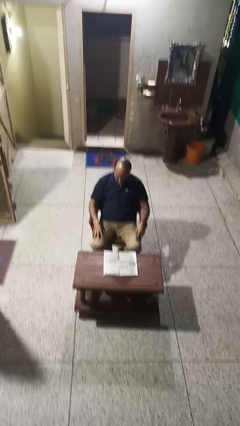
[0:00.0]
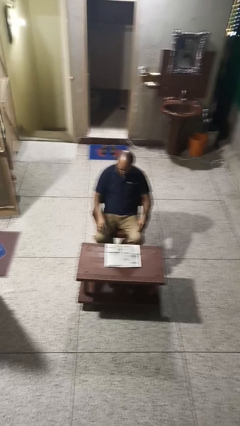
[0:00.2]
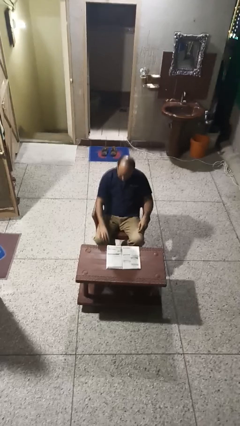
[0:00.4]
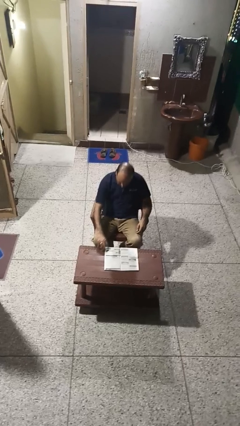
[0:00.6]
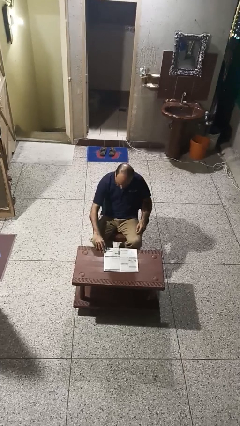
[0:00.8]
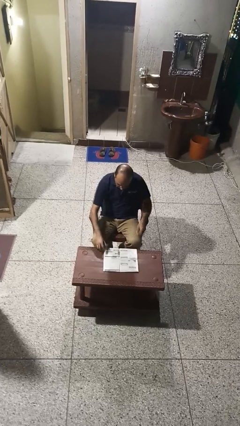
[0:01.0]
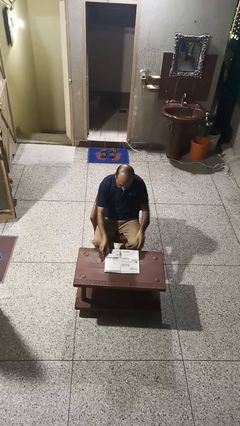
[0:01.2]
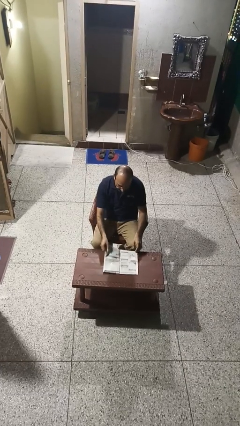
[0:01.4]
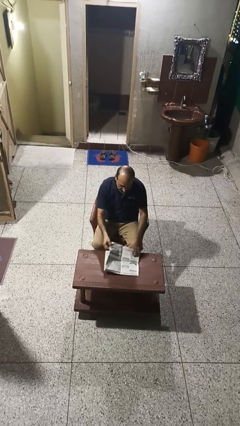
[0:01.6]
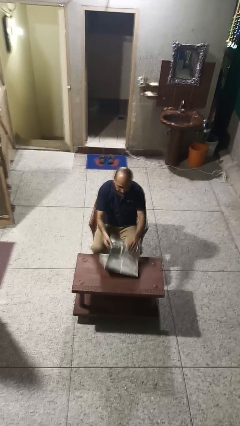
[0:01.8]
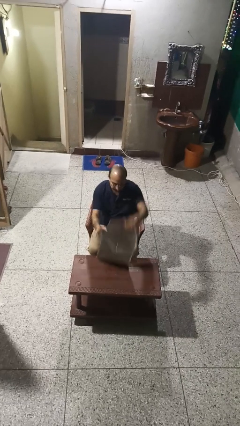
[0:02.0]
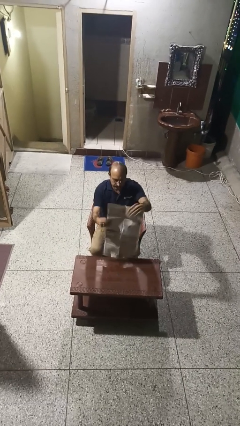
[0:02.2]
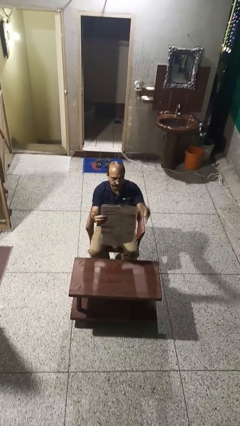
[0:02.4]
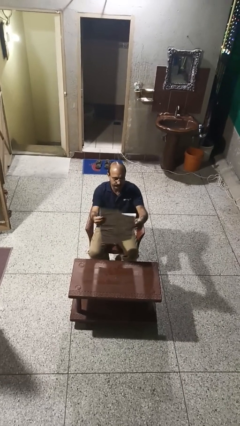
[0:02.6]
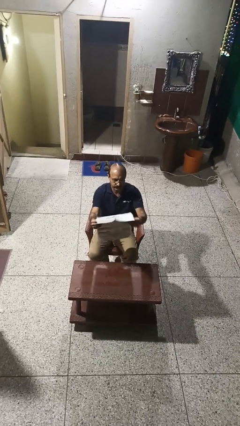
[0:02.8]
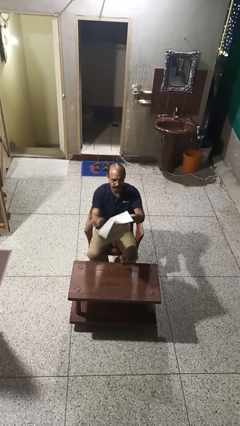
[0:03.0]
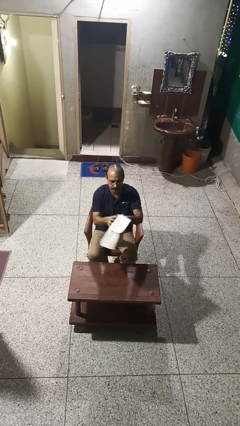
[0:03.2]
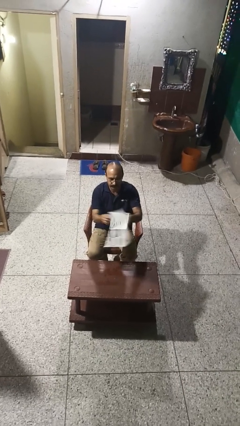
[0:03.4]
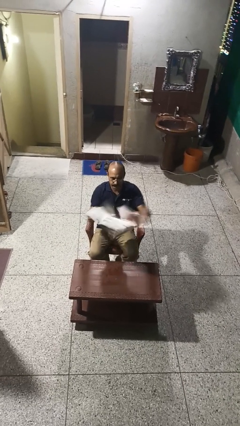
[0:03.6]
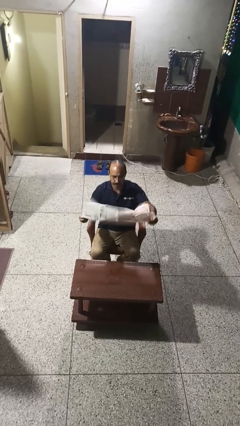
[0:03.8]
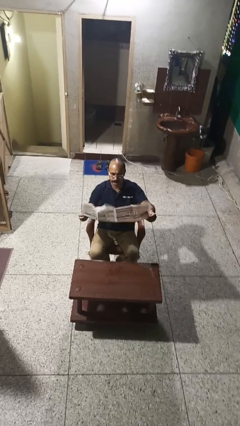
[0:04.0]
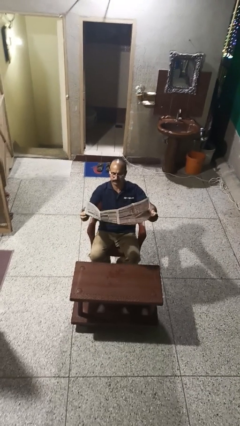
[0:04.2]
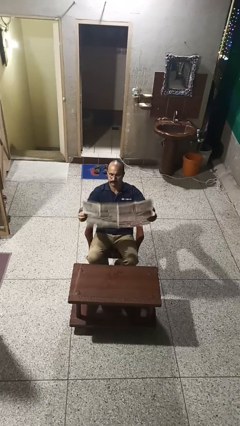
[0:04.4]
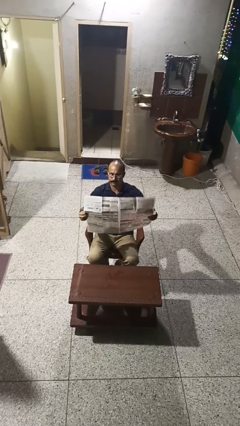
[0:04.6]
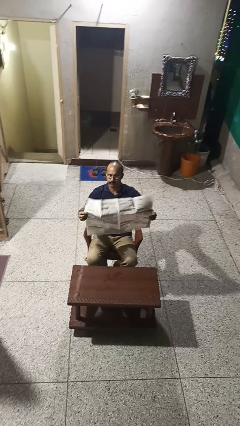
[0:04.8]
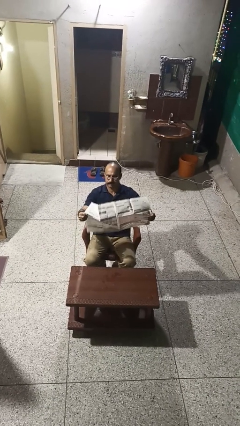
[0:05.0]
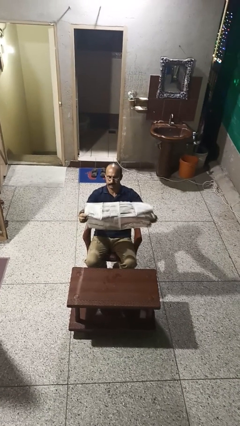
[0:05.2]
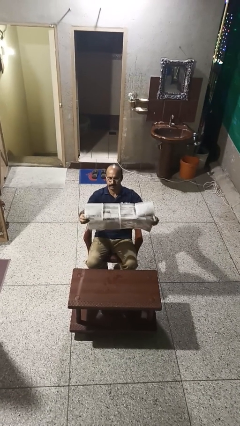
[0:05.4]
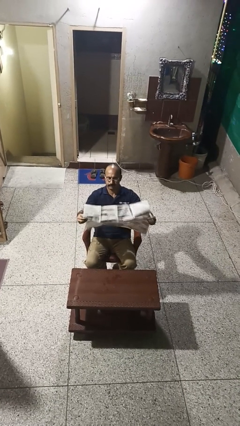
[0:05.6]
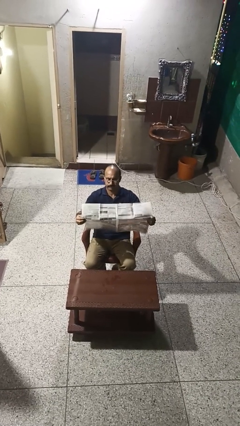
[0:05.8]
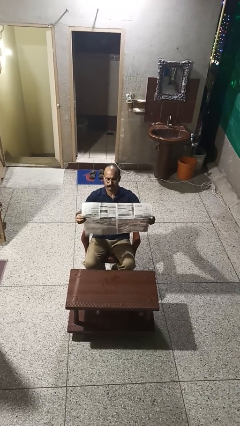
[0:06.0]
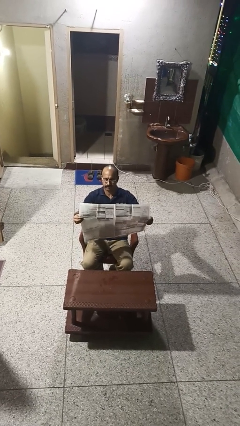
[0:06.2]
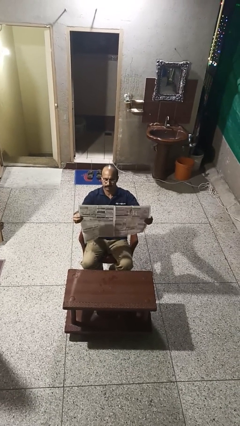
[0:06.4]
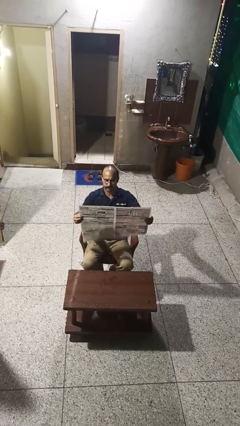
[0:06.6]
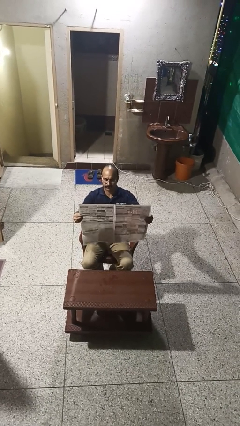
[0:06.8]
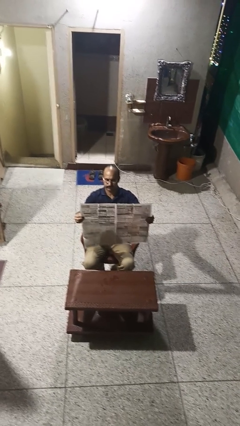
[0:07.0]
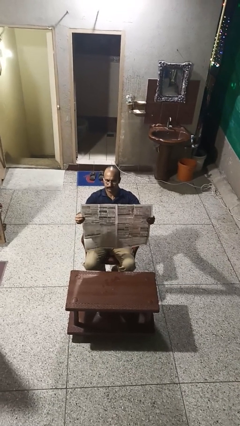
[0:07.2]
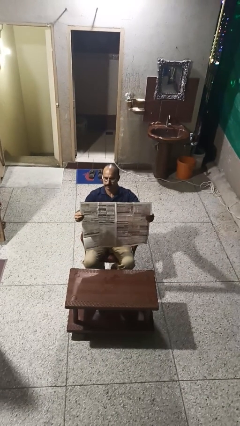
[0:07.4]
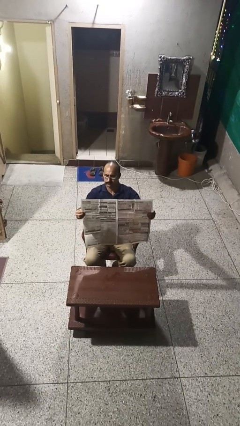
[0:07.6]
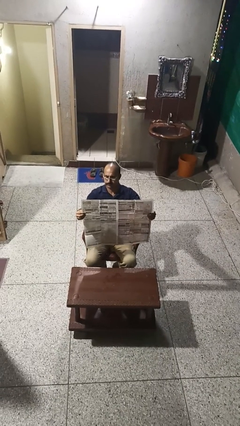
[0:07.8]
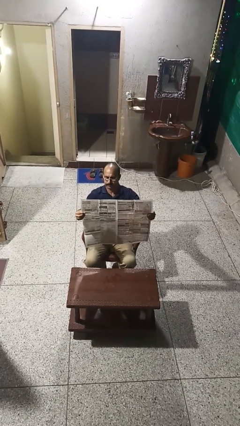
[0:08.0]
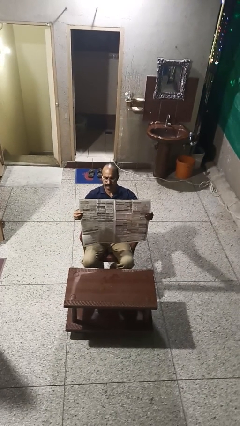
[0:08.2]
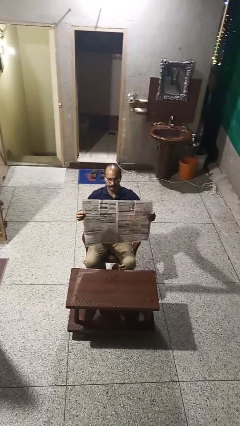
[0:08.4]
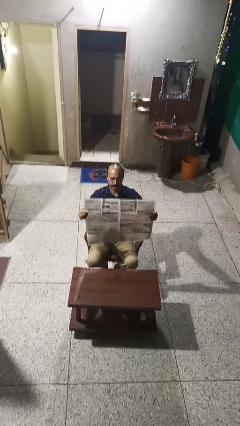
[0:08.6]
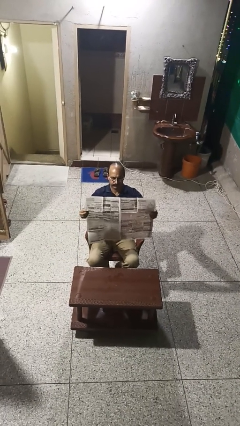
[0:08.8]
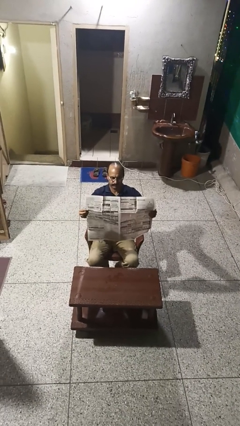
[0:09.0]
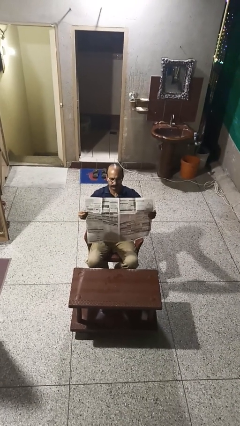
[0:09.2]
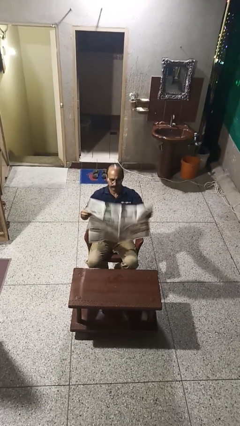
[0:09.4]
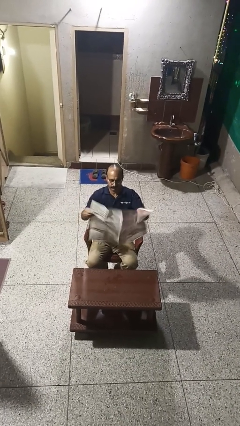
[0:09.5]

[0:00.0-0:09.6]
person reads newspaper

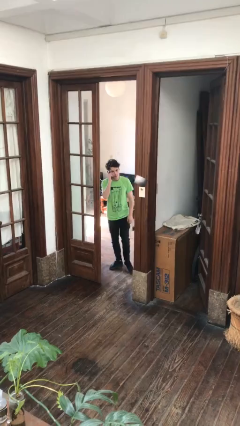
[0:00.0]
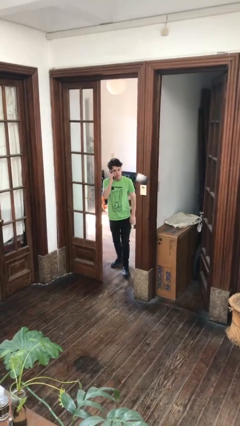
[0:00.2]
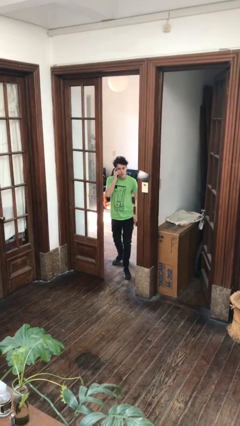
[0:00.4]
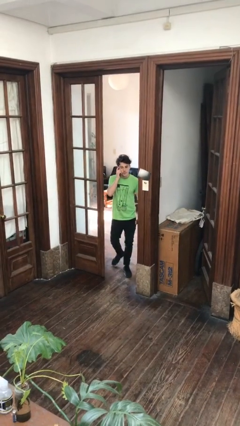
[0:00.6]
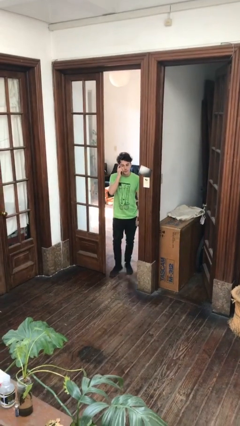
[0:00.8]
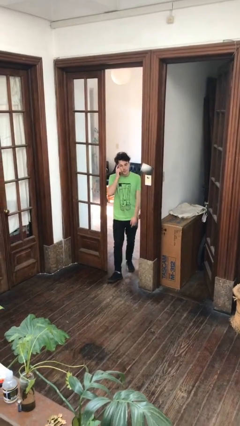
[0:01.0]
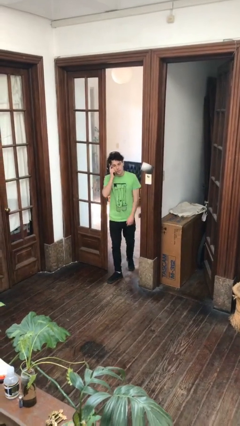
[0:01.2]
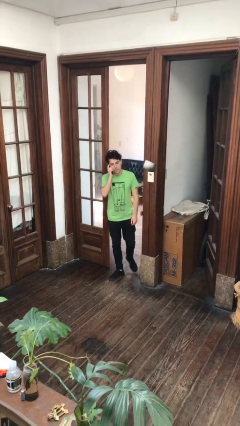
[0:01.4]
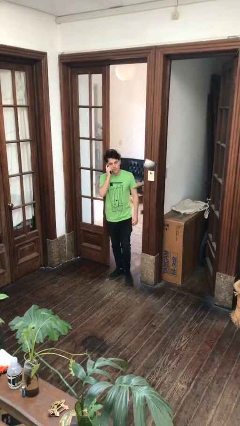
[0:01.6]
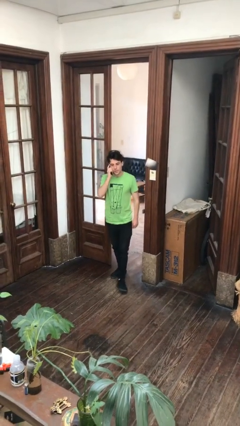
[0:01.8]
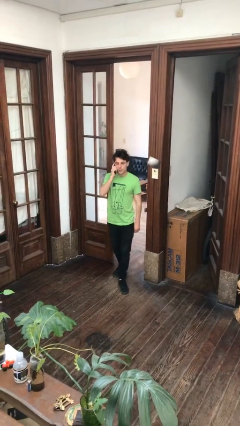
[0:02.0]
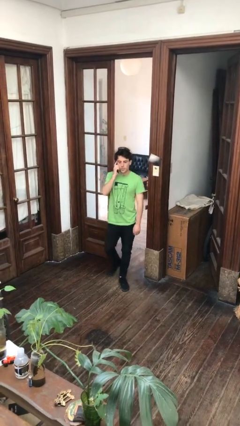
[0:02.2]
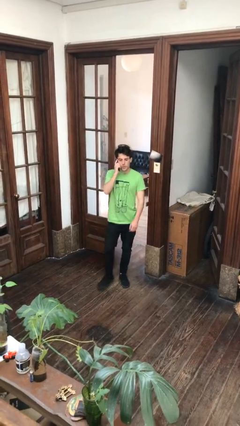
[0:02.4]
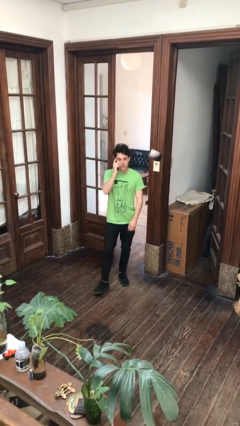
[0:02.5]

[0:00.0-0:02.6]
person enters scene through structure

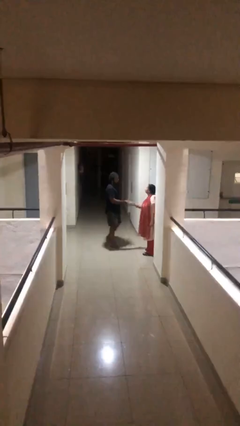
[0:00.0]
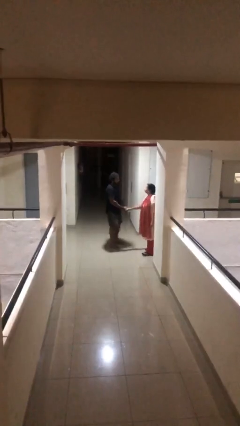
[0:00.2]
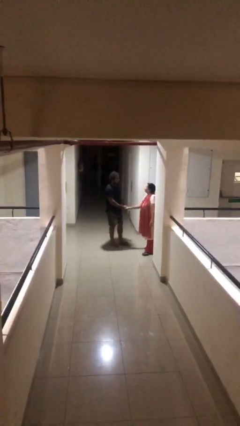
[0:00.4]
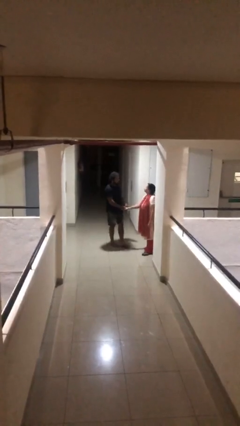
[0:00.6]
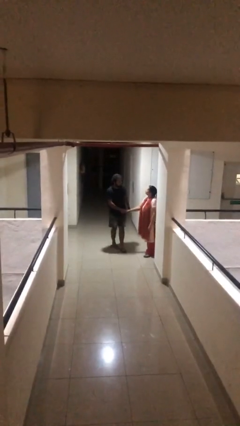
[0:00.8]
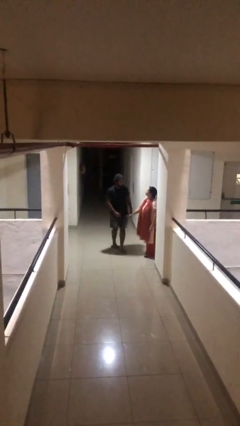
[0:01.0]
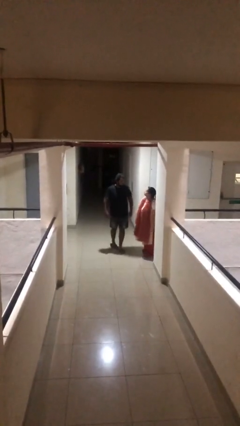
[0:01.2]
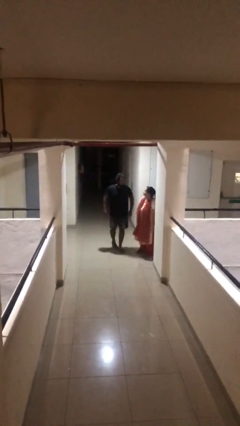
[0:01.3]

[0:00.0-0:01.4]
person shakes hand

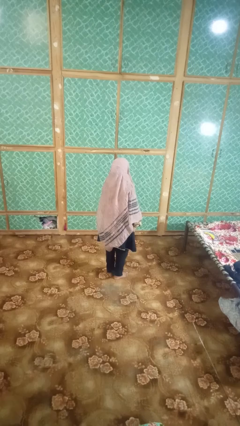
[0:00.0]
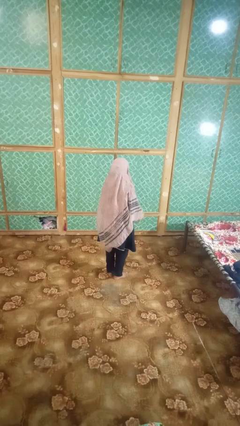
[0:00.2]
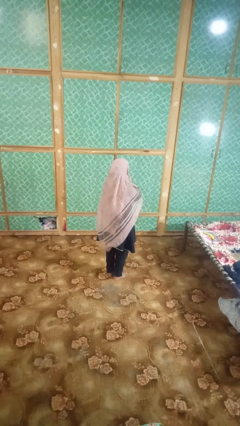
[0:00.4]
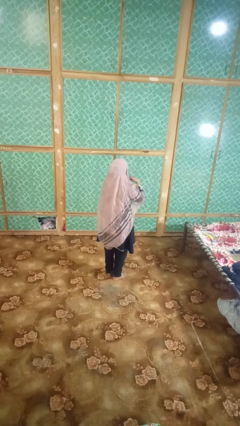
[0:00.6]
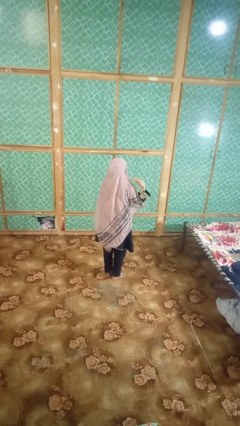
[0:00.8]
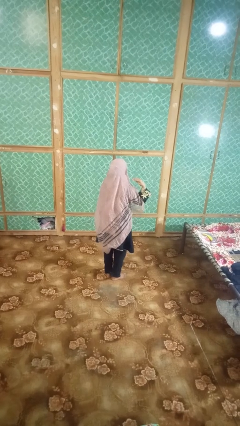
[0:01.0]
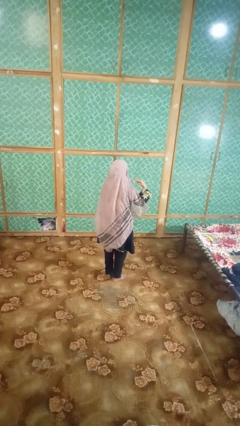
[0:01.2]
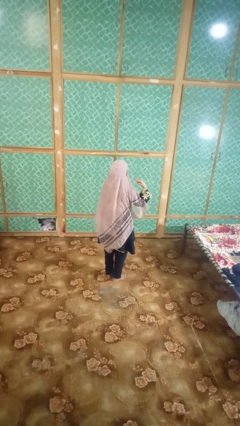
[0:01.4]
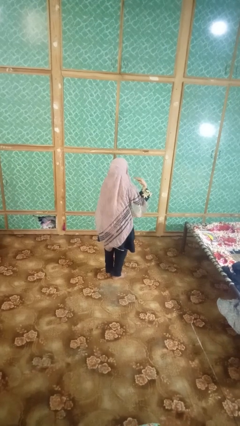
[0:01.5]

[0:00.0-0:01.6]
person gestures cut

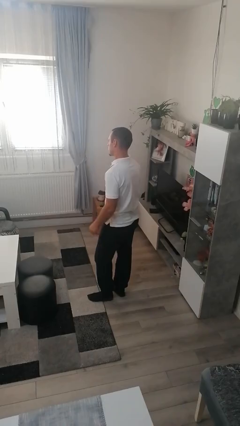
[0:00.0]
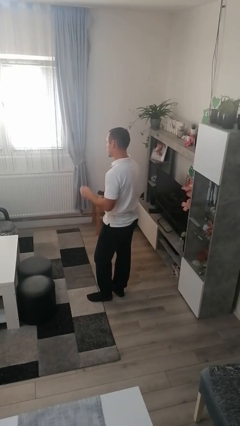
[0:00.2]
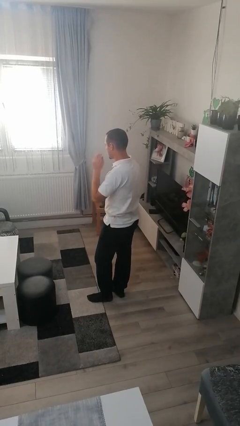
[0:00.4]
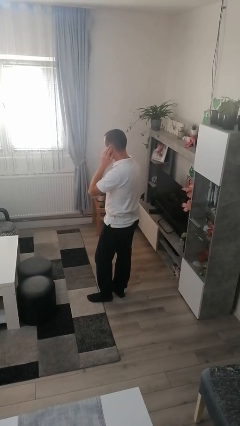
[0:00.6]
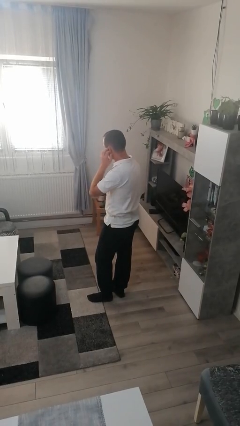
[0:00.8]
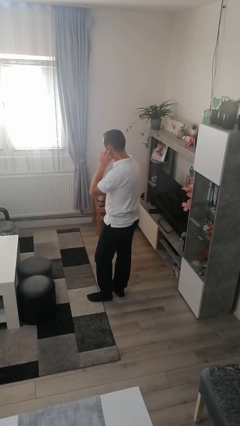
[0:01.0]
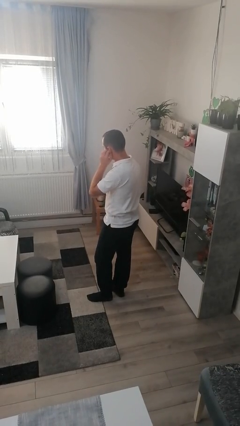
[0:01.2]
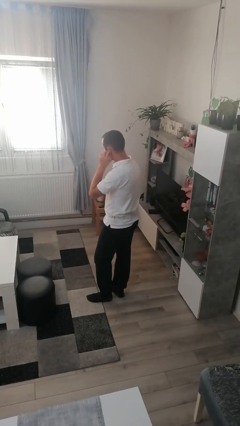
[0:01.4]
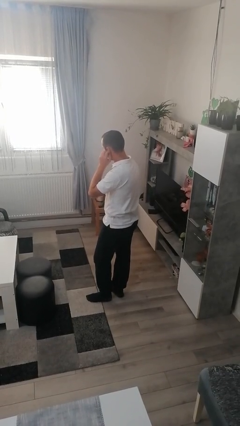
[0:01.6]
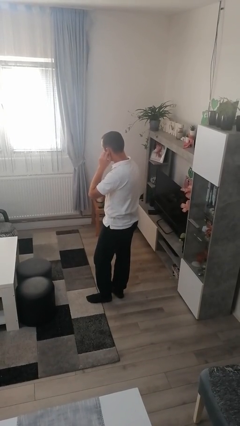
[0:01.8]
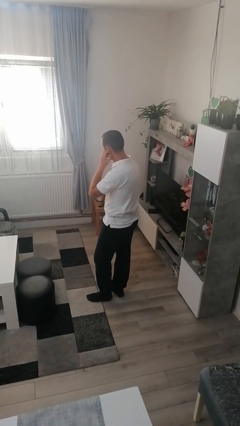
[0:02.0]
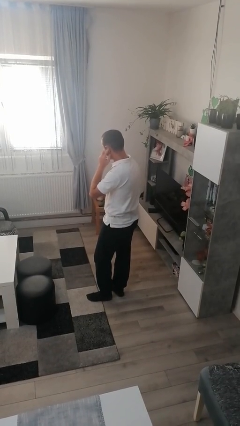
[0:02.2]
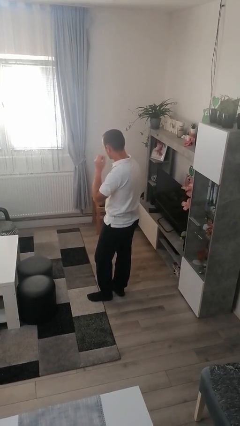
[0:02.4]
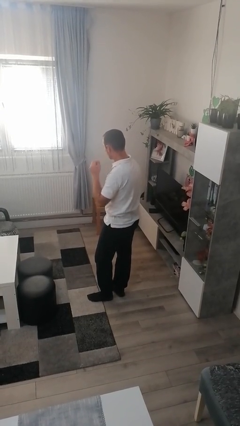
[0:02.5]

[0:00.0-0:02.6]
person touches earlobe
